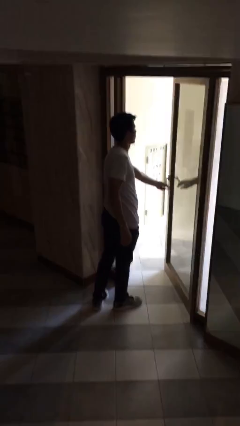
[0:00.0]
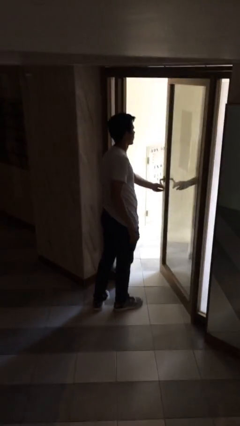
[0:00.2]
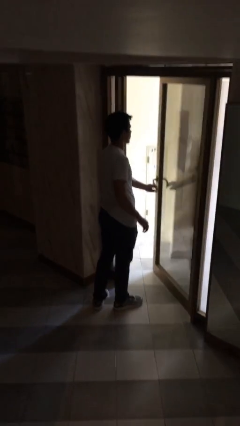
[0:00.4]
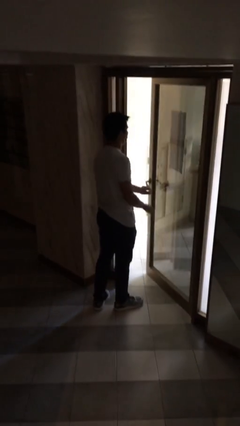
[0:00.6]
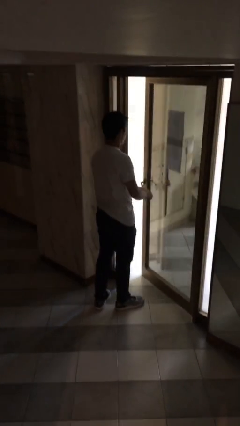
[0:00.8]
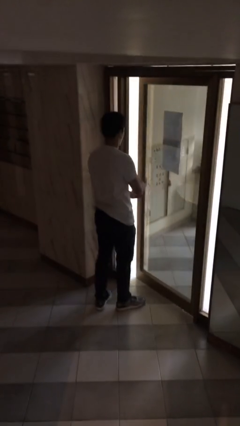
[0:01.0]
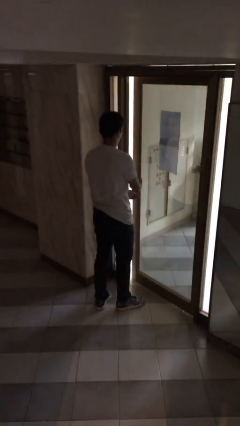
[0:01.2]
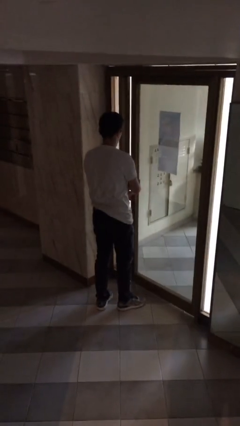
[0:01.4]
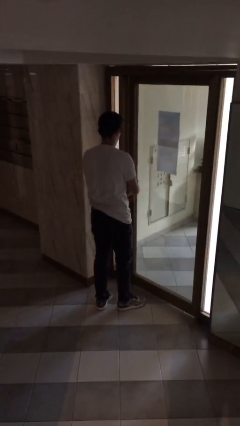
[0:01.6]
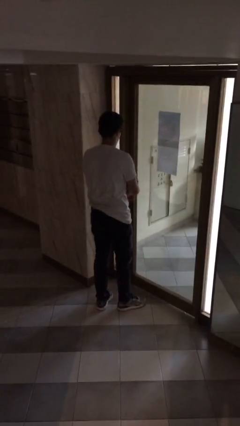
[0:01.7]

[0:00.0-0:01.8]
person closes facility door

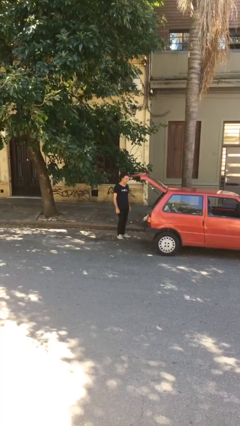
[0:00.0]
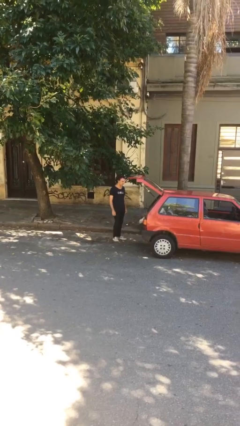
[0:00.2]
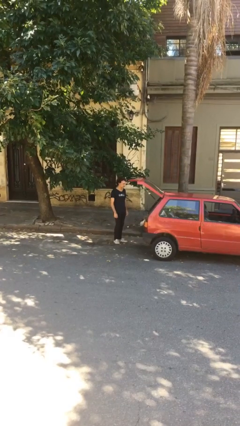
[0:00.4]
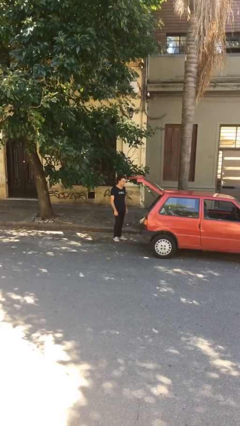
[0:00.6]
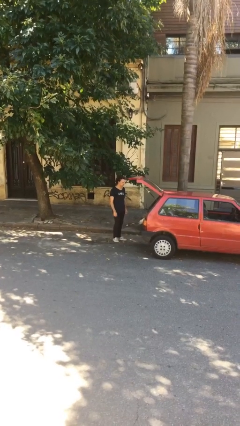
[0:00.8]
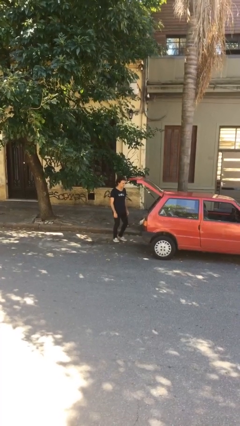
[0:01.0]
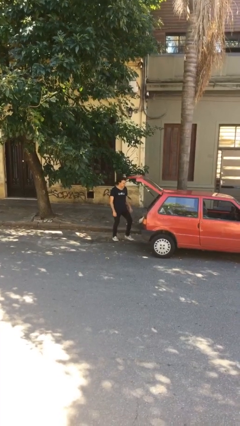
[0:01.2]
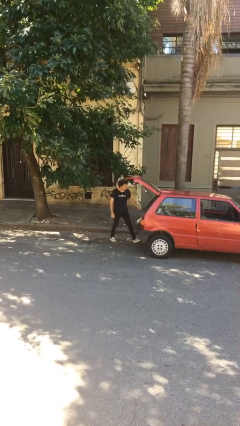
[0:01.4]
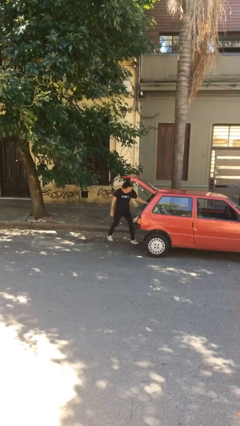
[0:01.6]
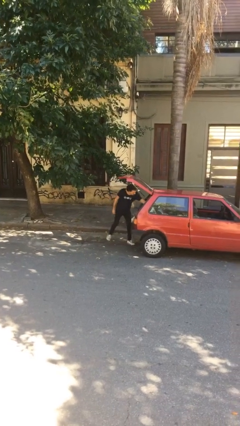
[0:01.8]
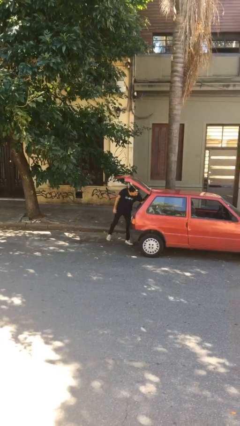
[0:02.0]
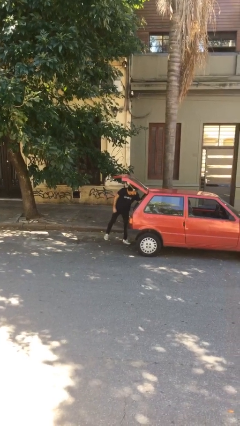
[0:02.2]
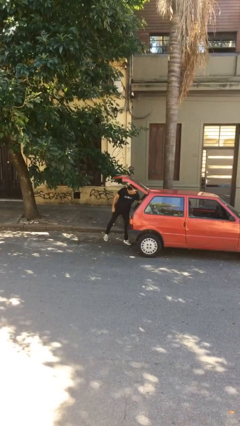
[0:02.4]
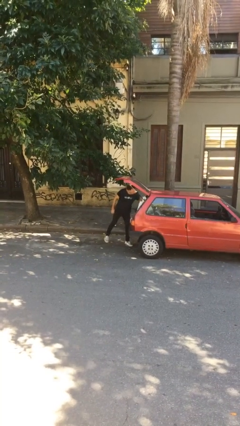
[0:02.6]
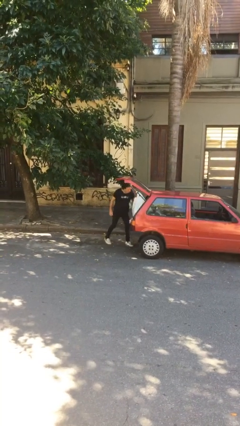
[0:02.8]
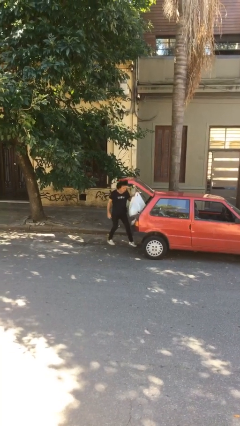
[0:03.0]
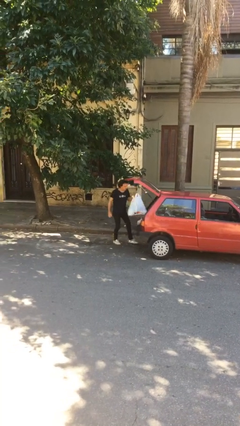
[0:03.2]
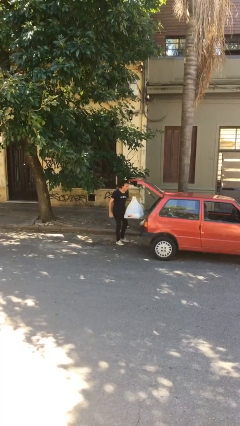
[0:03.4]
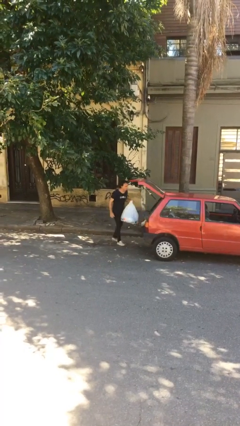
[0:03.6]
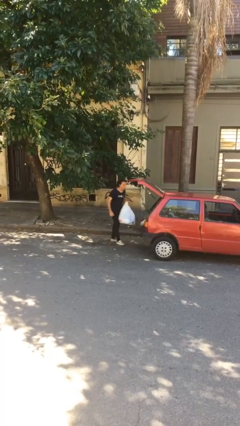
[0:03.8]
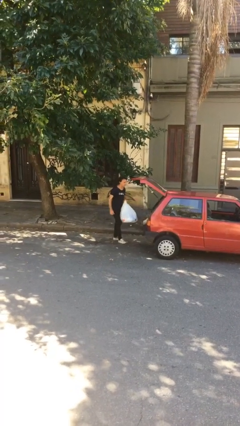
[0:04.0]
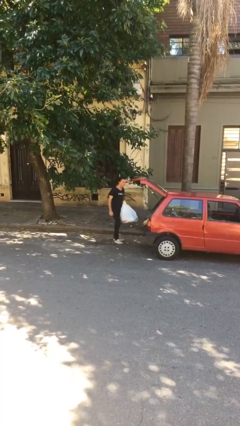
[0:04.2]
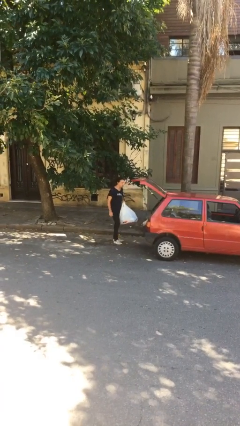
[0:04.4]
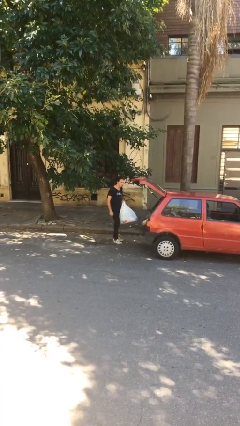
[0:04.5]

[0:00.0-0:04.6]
person unloads car

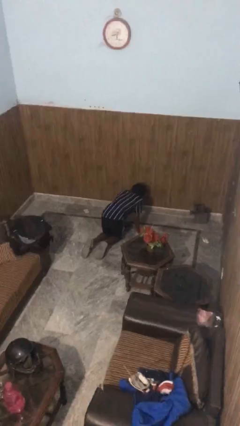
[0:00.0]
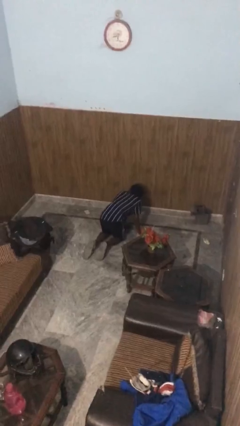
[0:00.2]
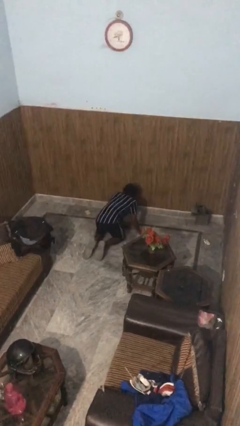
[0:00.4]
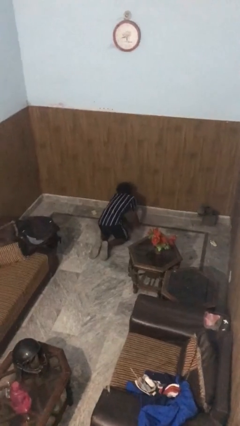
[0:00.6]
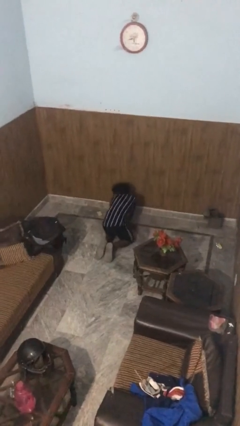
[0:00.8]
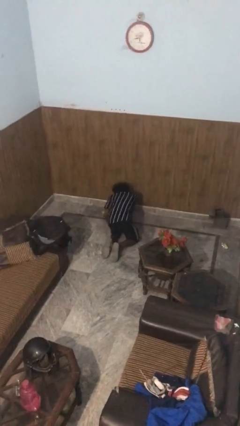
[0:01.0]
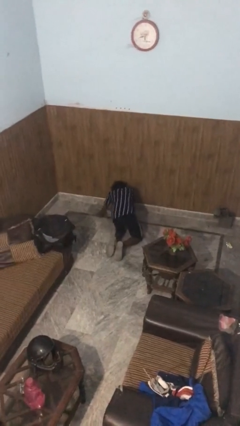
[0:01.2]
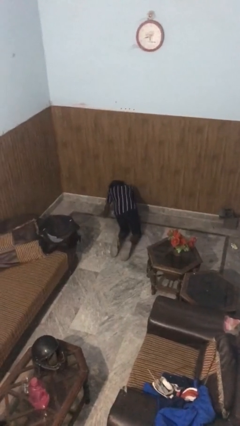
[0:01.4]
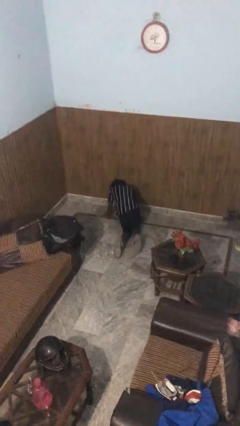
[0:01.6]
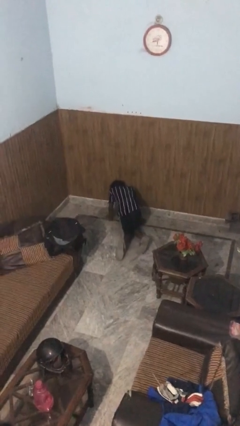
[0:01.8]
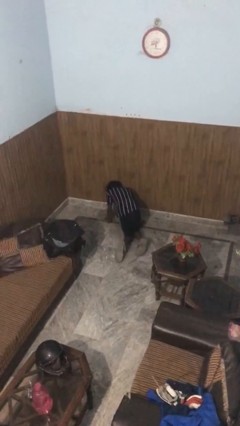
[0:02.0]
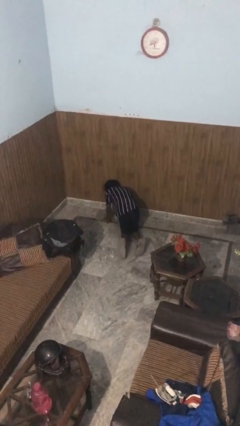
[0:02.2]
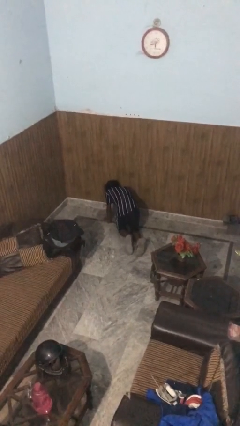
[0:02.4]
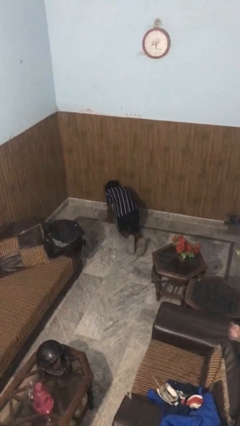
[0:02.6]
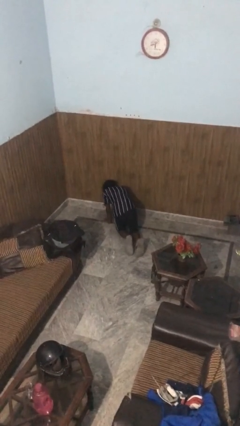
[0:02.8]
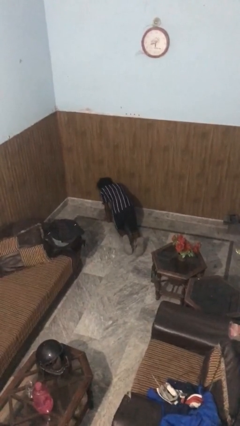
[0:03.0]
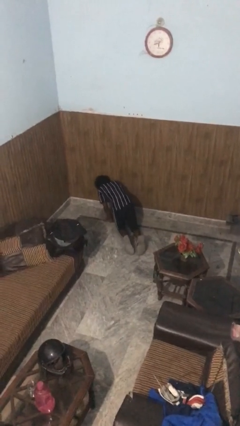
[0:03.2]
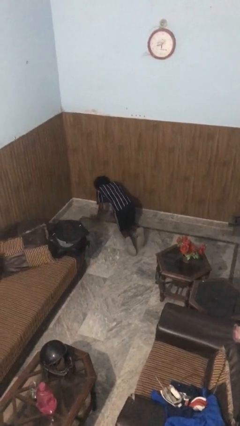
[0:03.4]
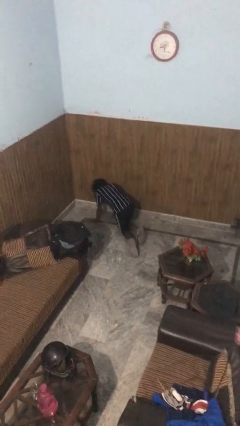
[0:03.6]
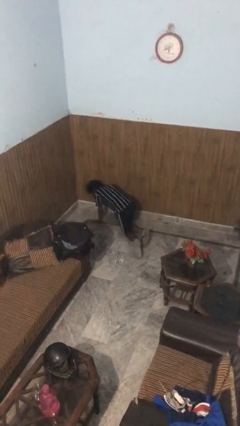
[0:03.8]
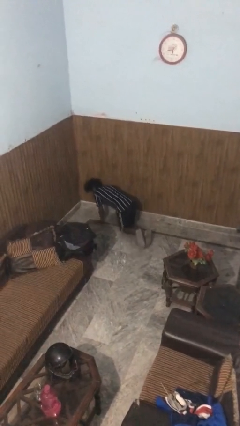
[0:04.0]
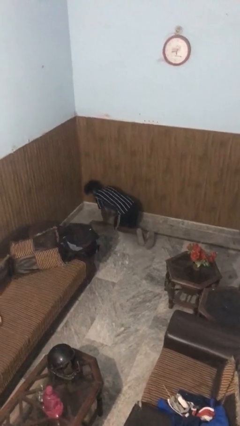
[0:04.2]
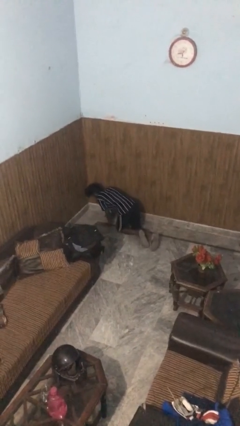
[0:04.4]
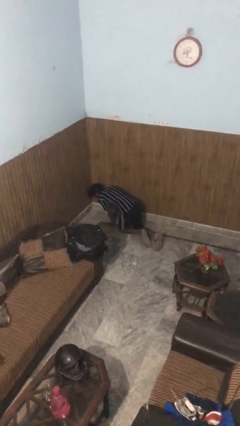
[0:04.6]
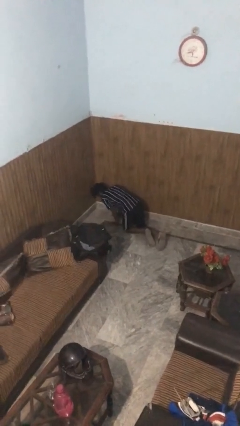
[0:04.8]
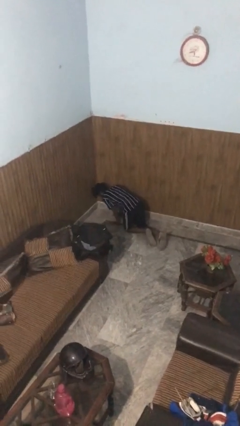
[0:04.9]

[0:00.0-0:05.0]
person crawls

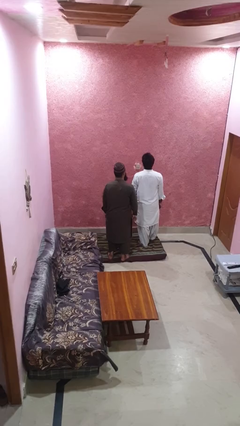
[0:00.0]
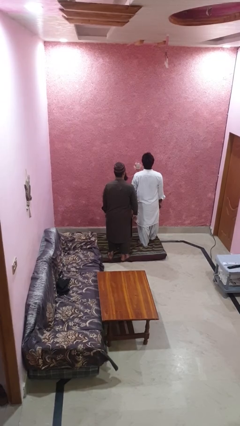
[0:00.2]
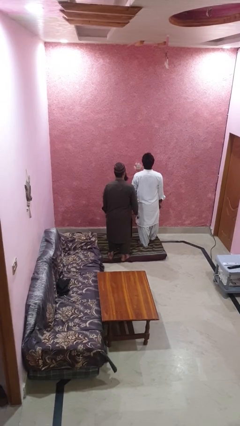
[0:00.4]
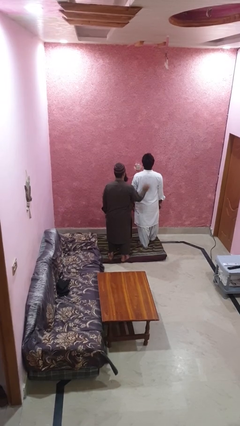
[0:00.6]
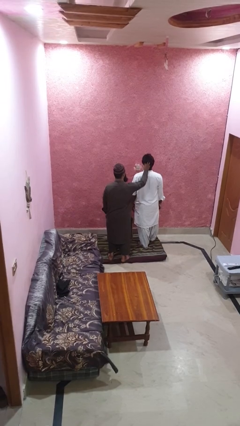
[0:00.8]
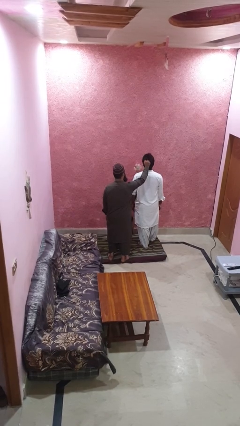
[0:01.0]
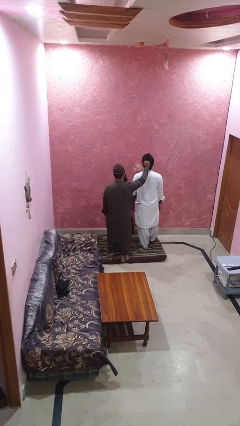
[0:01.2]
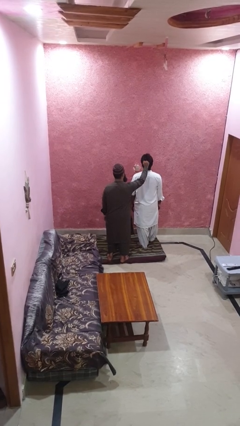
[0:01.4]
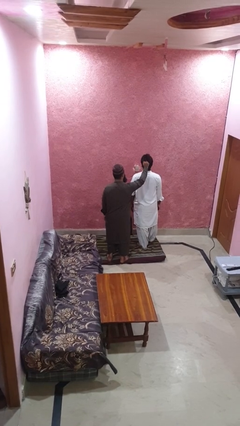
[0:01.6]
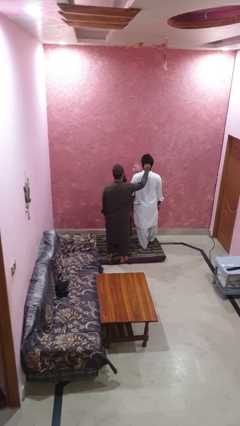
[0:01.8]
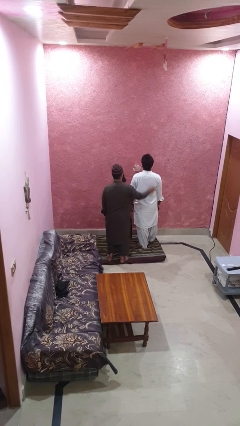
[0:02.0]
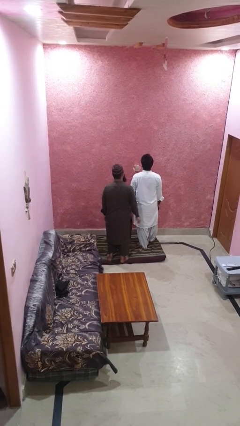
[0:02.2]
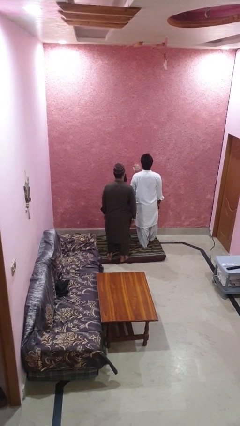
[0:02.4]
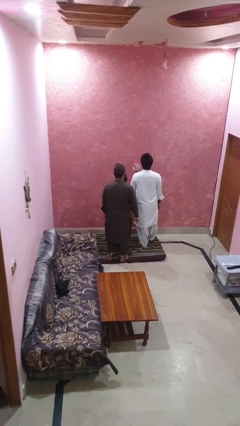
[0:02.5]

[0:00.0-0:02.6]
person grabs person by hair

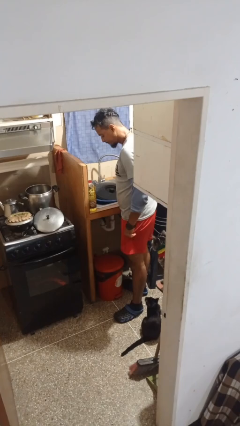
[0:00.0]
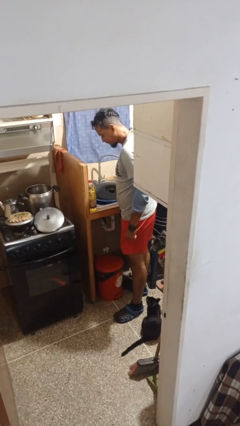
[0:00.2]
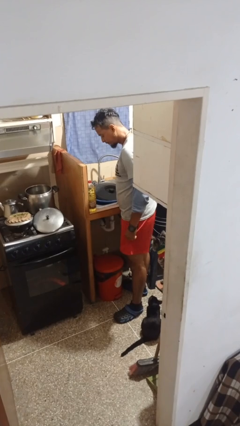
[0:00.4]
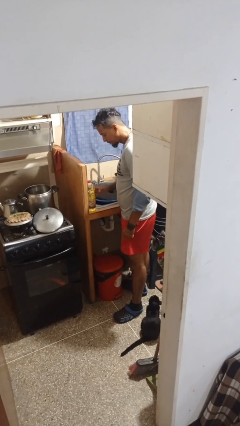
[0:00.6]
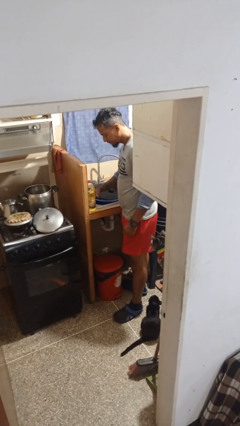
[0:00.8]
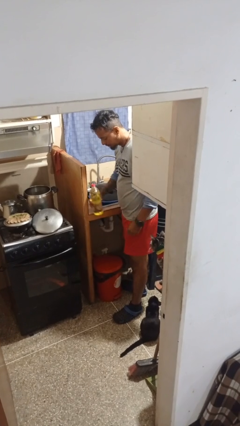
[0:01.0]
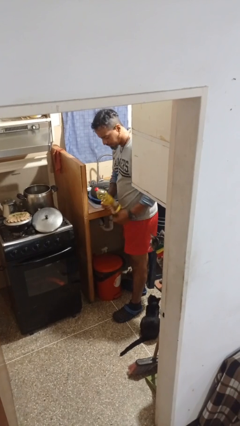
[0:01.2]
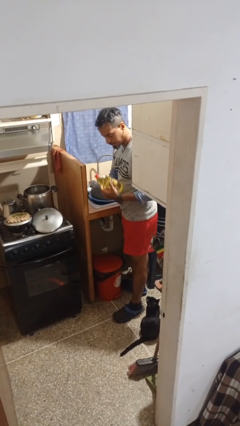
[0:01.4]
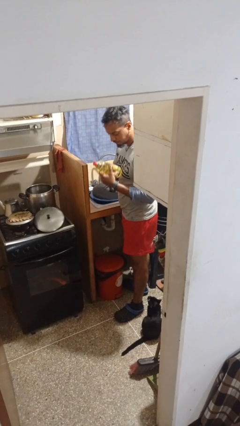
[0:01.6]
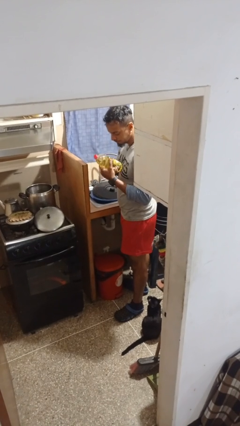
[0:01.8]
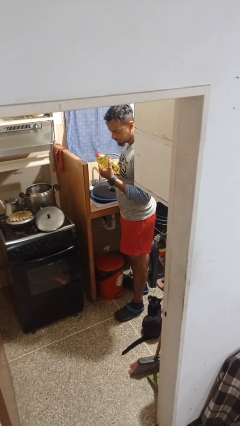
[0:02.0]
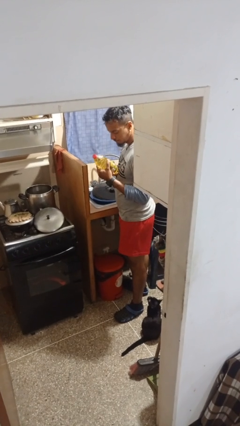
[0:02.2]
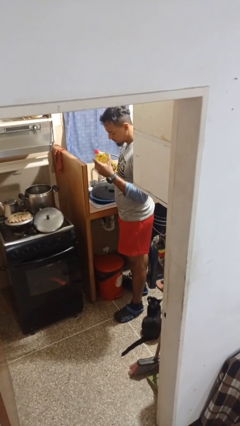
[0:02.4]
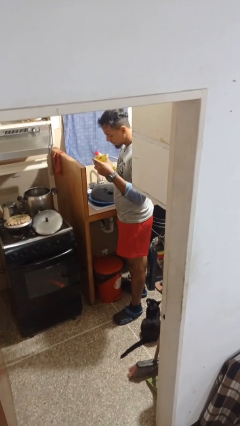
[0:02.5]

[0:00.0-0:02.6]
person picks up object from countertop

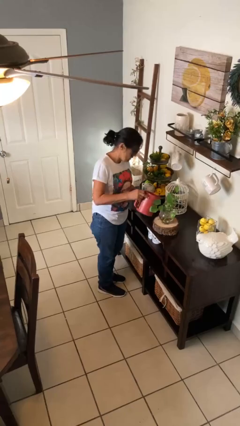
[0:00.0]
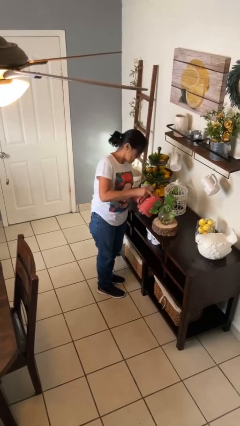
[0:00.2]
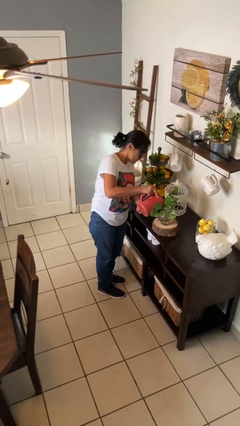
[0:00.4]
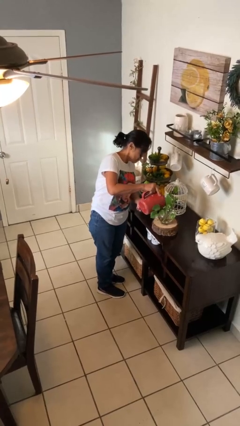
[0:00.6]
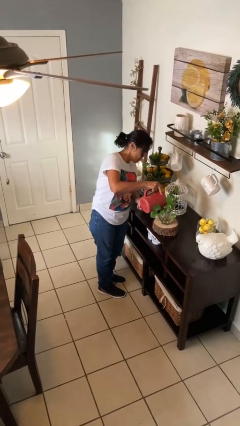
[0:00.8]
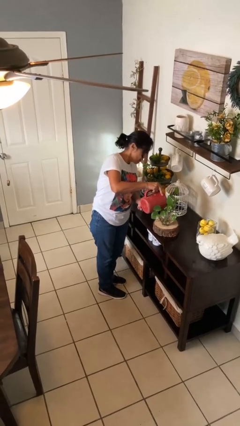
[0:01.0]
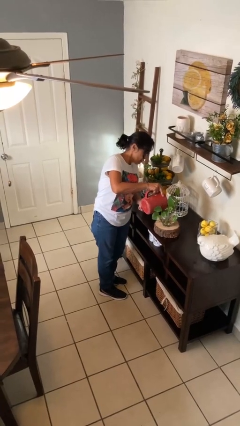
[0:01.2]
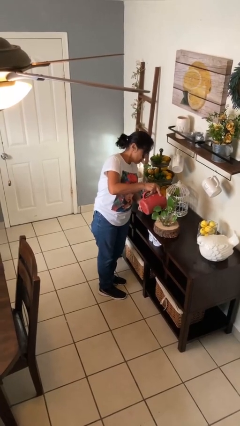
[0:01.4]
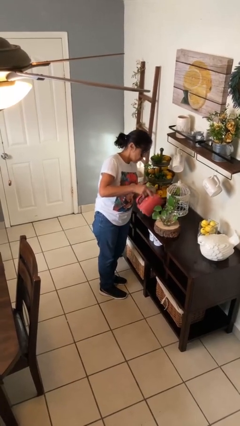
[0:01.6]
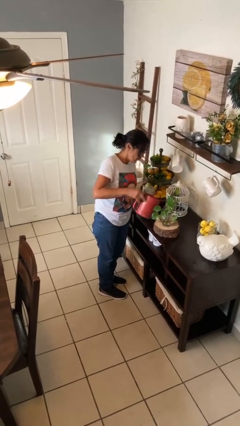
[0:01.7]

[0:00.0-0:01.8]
person waters houseplant
